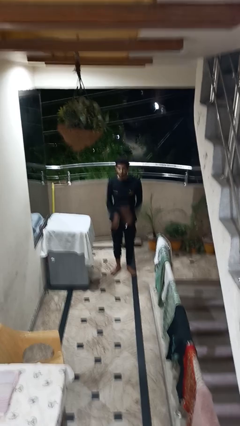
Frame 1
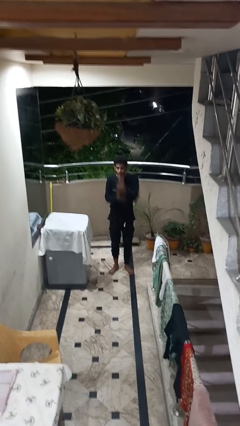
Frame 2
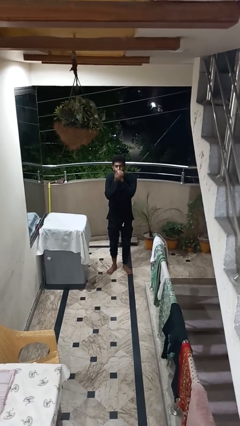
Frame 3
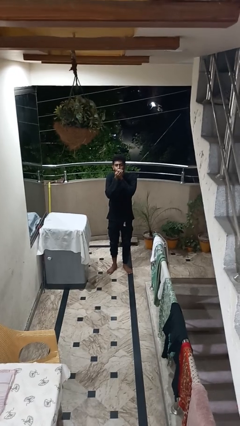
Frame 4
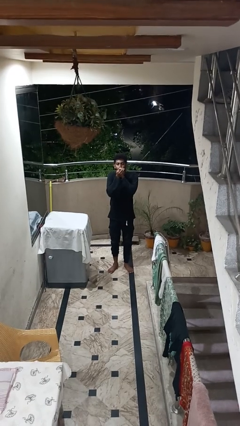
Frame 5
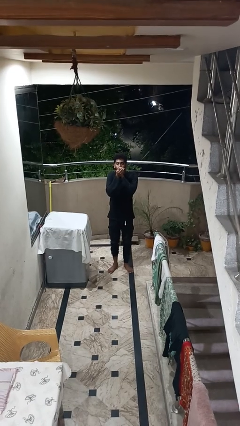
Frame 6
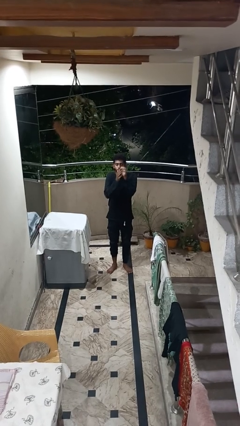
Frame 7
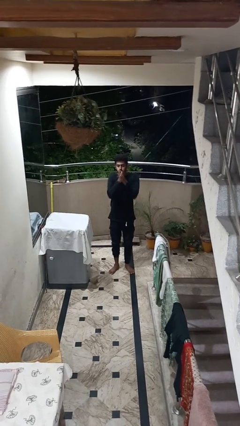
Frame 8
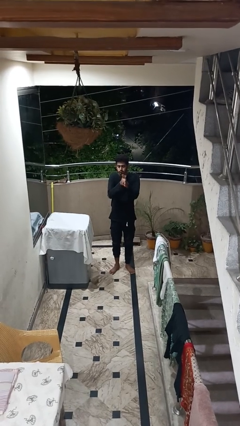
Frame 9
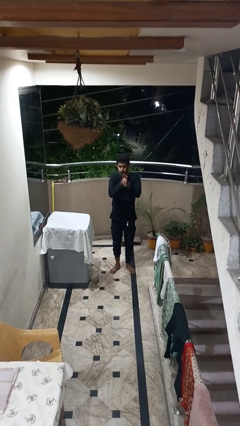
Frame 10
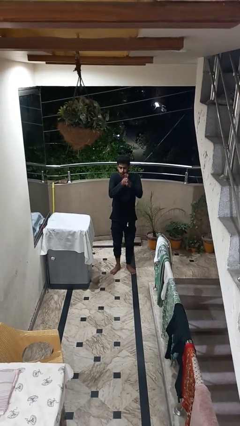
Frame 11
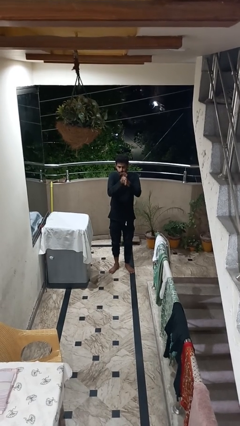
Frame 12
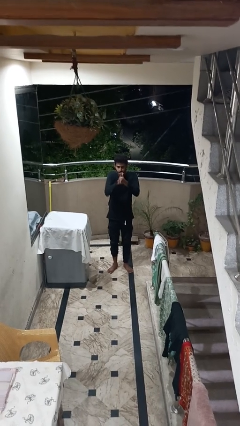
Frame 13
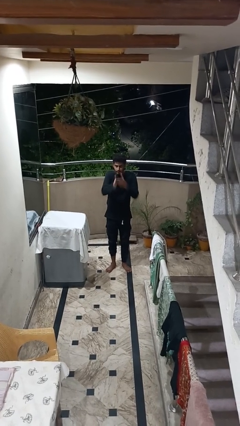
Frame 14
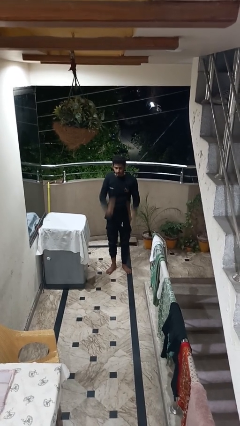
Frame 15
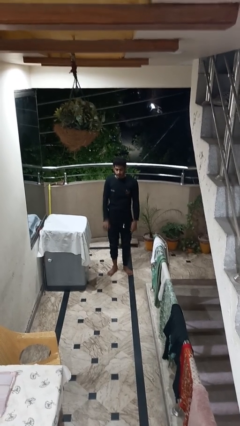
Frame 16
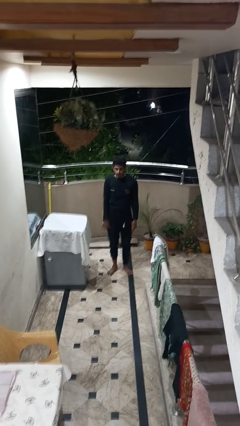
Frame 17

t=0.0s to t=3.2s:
person blows into hands

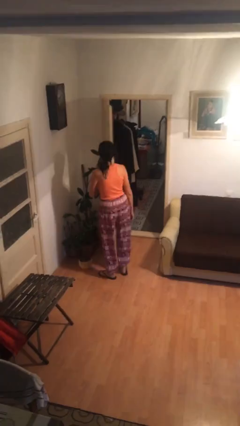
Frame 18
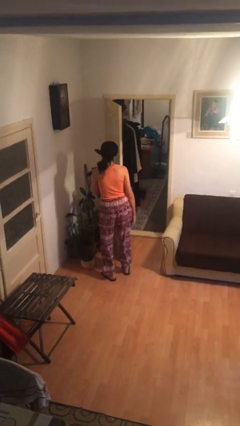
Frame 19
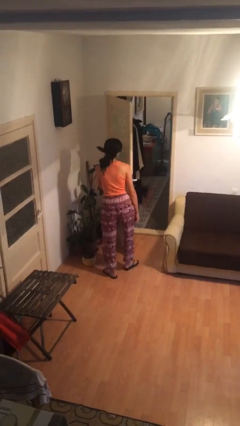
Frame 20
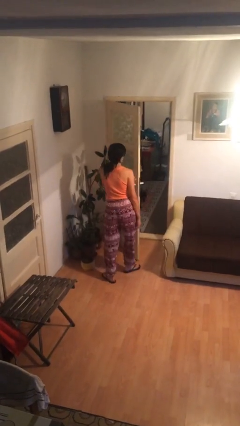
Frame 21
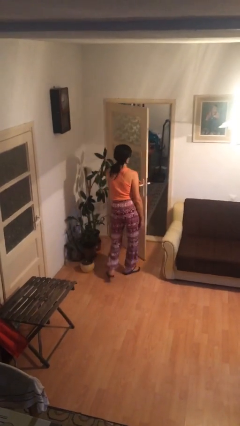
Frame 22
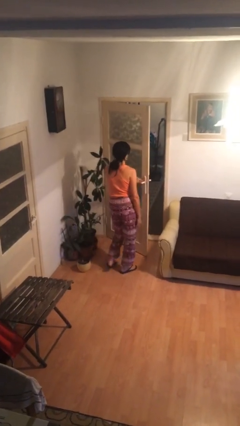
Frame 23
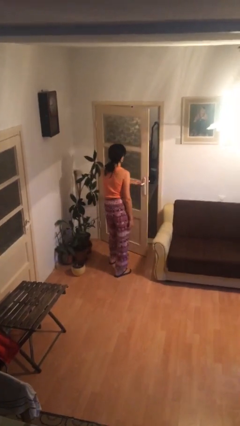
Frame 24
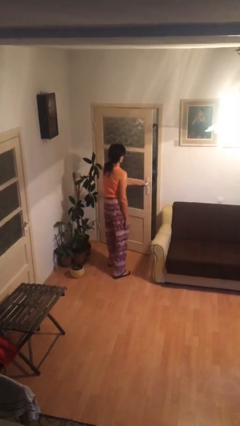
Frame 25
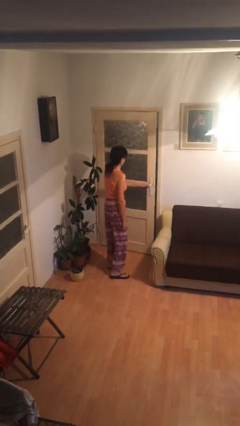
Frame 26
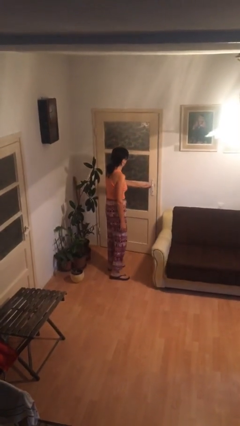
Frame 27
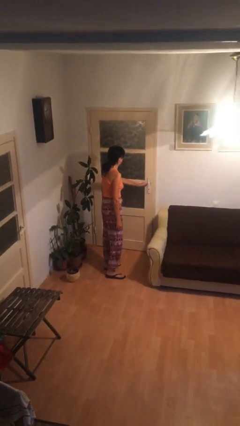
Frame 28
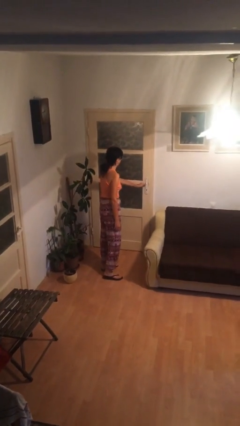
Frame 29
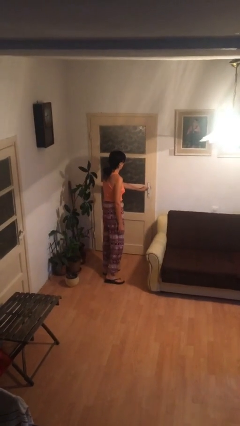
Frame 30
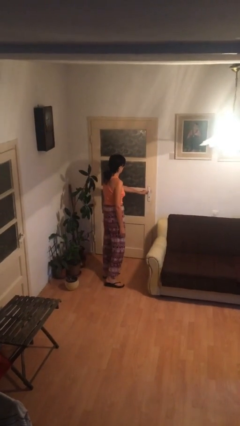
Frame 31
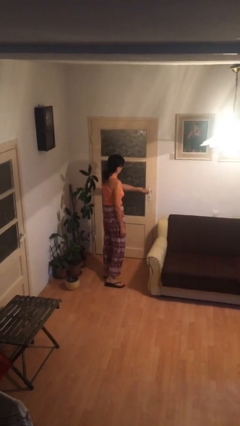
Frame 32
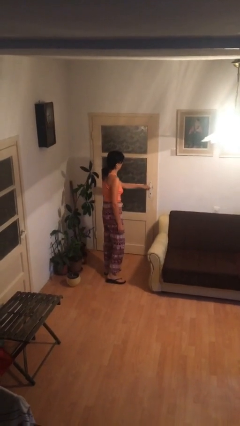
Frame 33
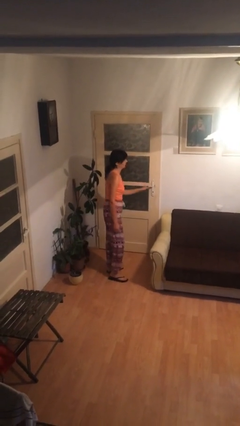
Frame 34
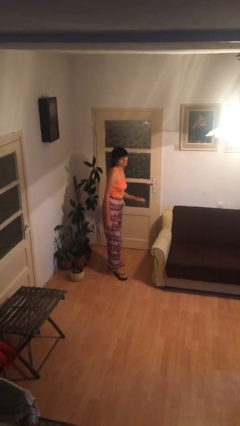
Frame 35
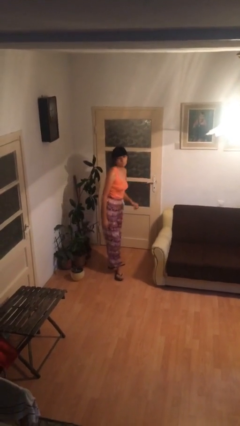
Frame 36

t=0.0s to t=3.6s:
person closes facility door

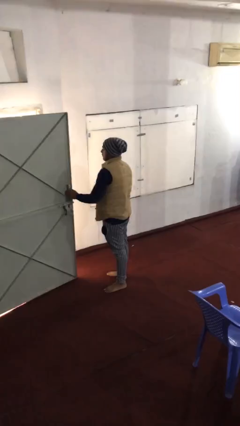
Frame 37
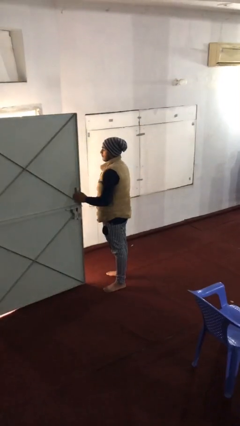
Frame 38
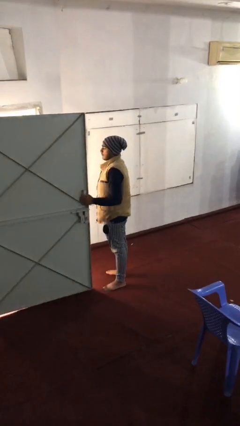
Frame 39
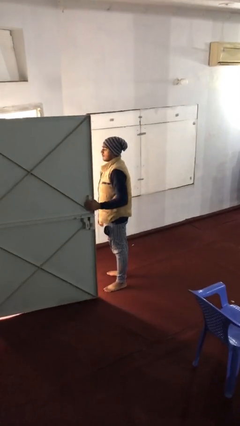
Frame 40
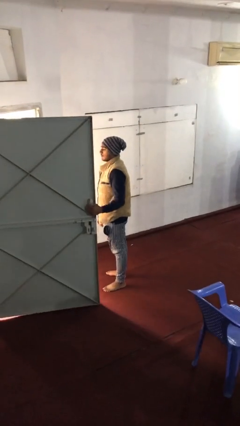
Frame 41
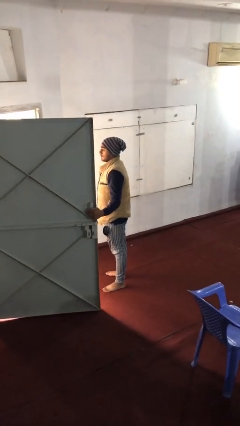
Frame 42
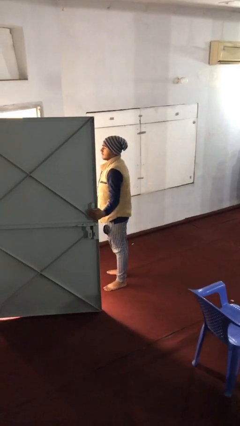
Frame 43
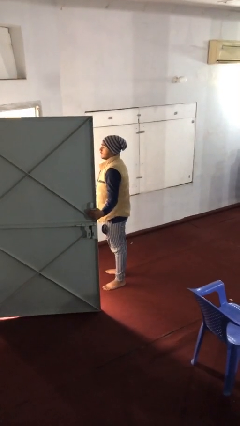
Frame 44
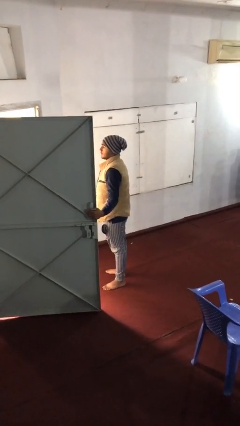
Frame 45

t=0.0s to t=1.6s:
person opens facility door

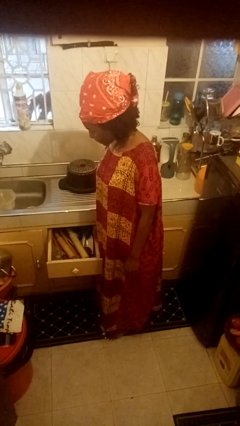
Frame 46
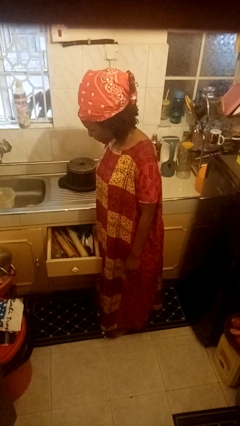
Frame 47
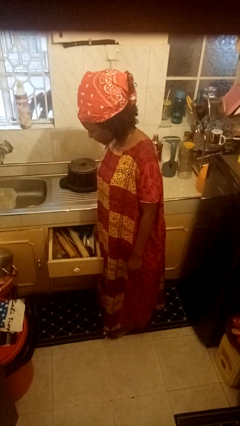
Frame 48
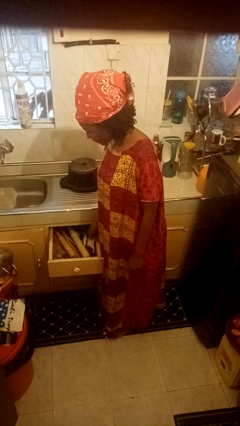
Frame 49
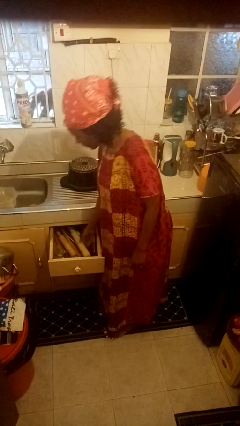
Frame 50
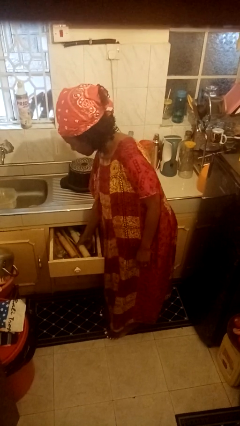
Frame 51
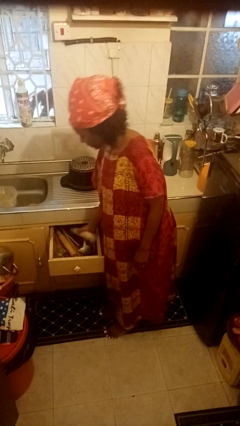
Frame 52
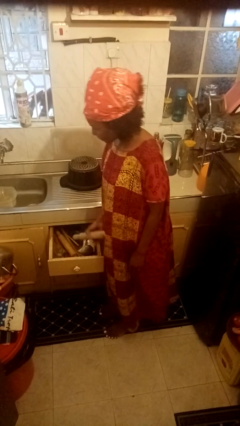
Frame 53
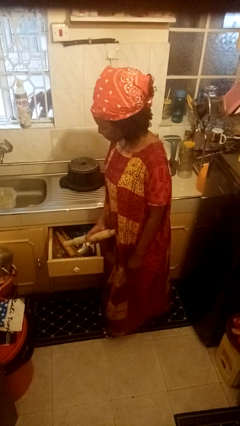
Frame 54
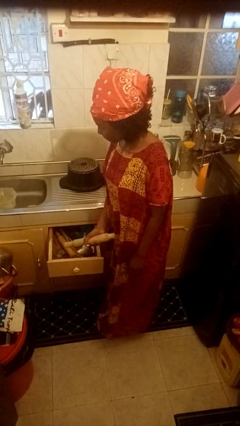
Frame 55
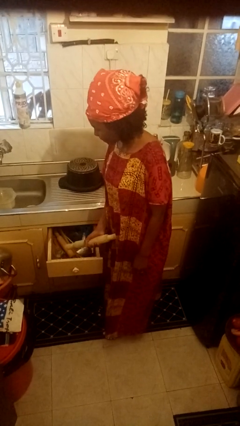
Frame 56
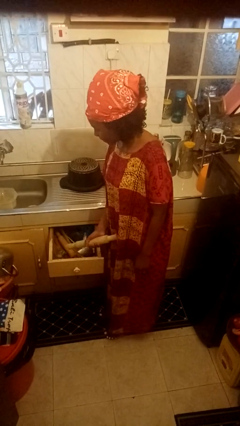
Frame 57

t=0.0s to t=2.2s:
person takes object from kitchen drawer

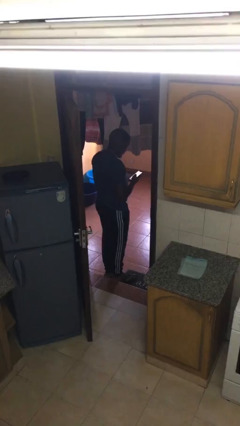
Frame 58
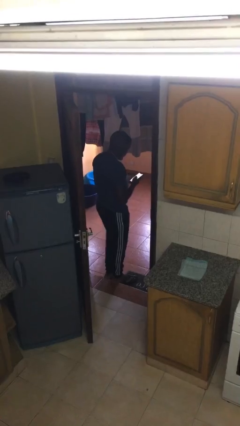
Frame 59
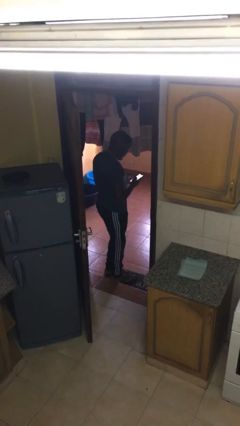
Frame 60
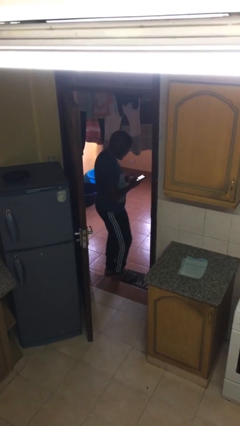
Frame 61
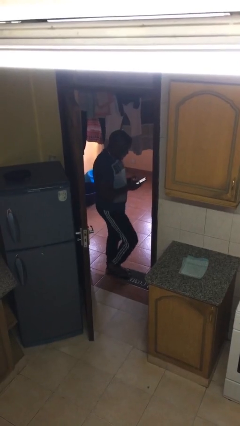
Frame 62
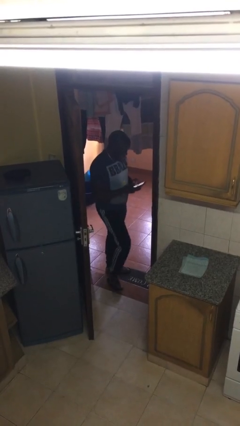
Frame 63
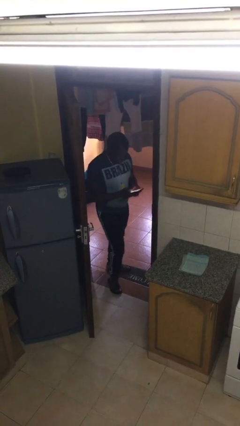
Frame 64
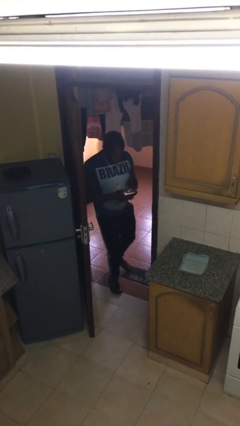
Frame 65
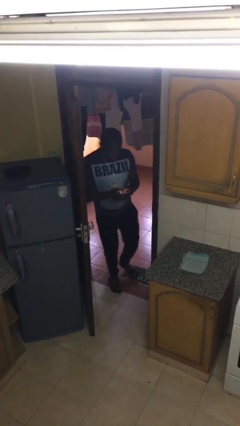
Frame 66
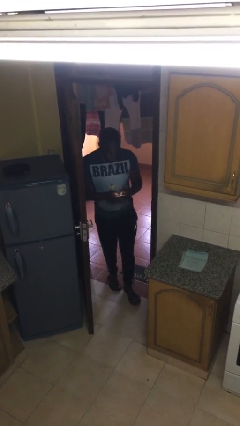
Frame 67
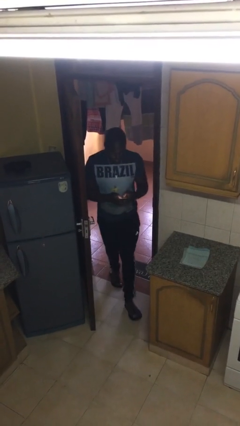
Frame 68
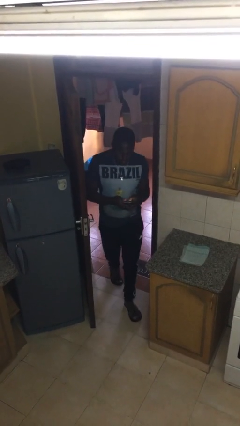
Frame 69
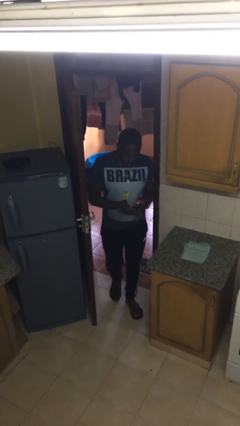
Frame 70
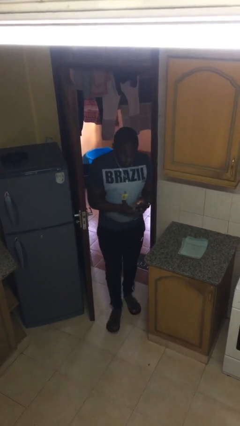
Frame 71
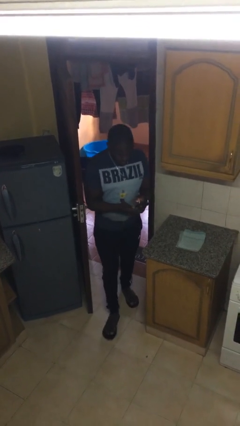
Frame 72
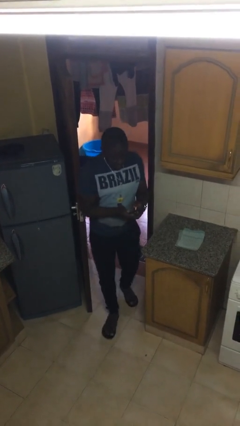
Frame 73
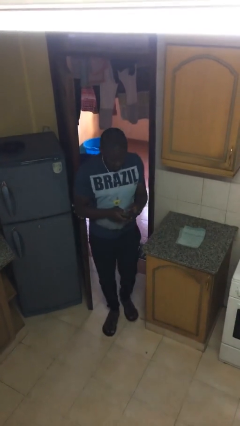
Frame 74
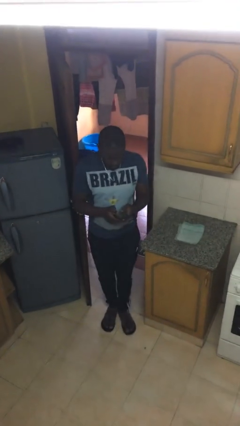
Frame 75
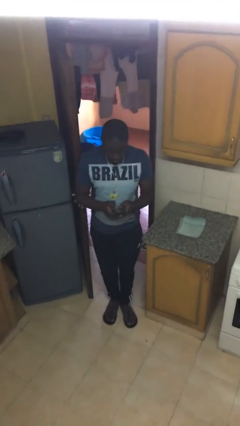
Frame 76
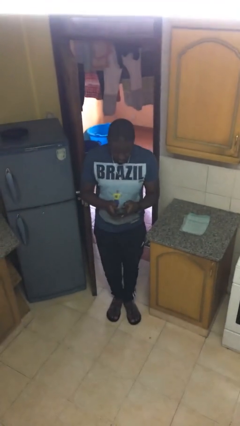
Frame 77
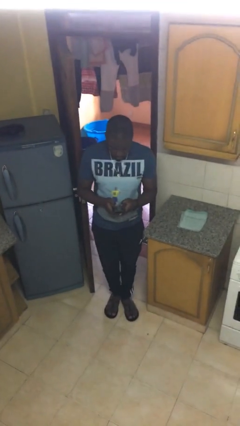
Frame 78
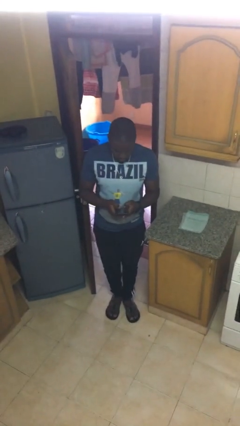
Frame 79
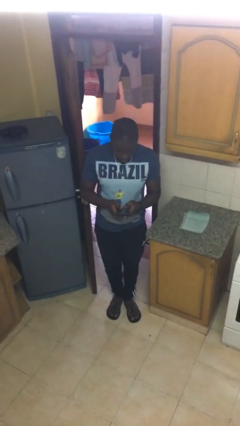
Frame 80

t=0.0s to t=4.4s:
person enters scene through structure

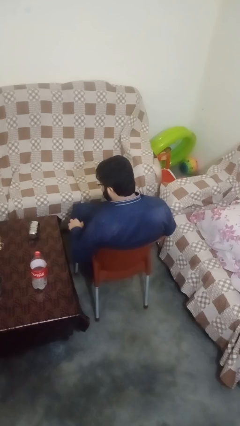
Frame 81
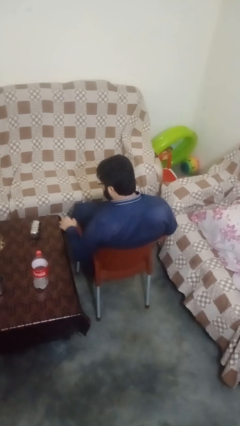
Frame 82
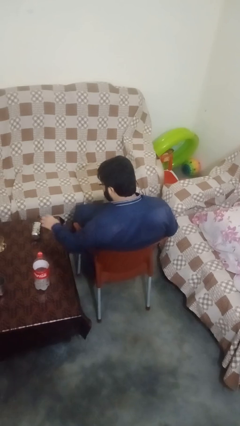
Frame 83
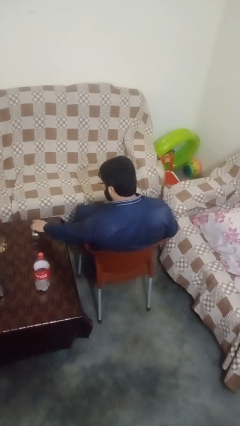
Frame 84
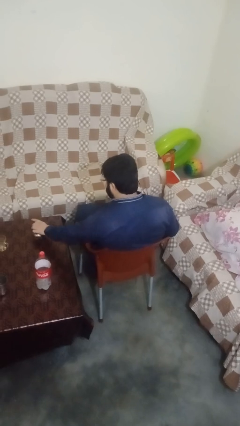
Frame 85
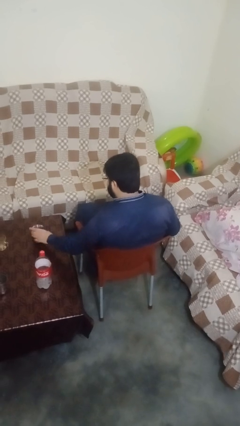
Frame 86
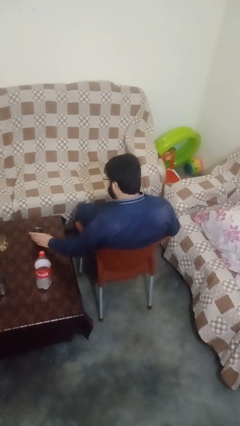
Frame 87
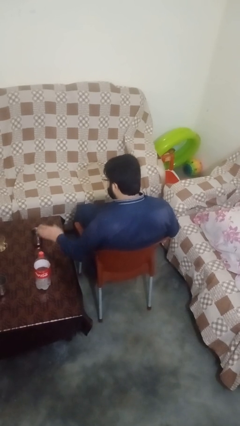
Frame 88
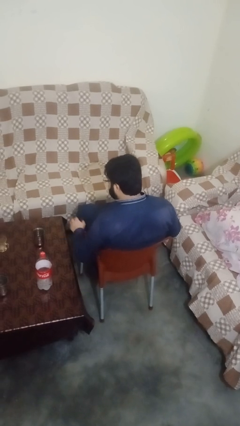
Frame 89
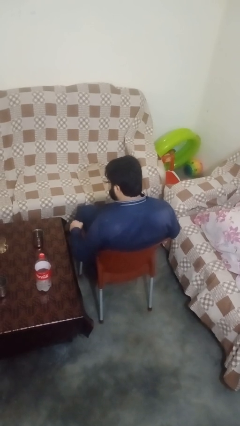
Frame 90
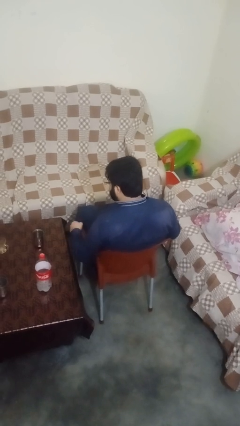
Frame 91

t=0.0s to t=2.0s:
person sets upright glass

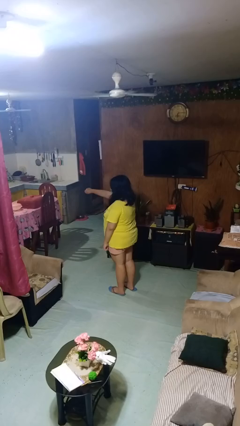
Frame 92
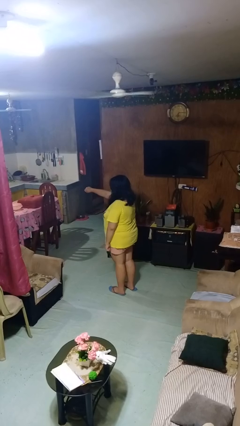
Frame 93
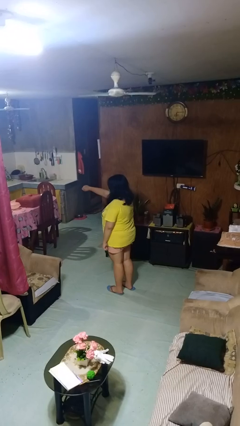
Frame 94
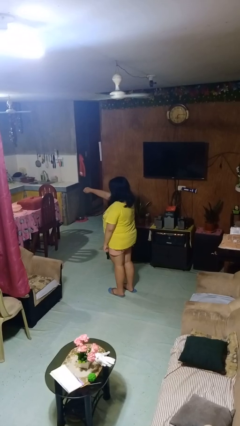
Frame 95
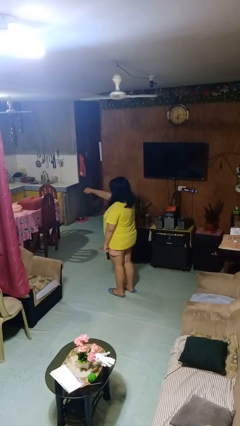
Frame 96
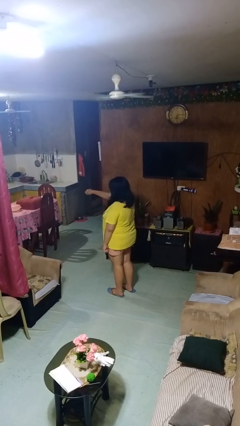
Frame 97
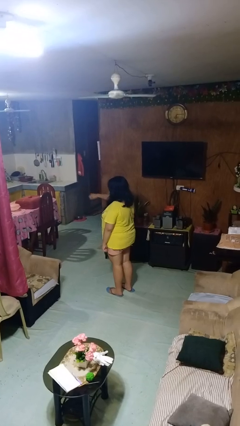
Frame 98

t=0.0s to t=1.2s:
person punches
